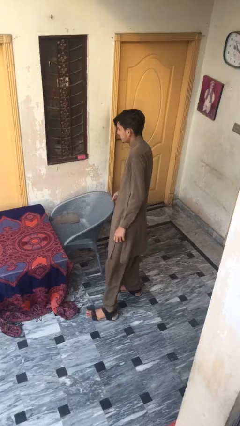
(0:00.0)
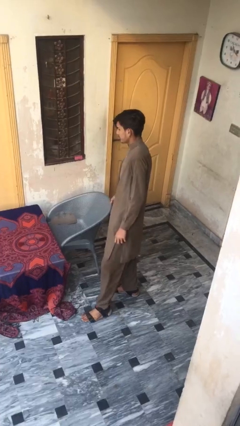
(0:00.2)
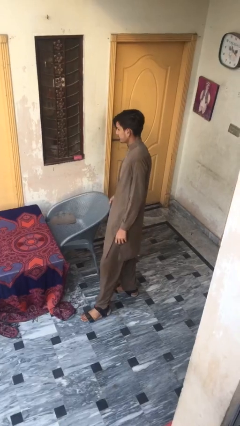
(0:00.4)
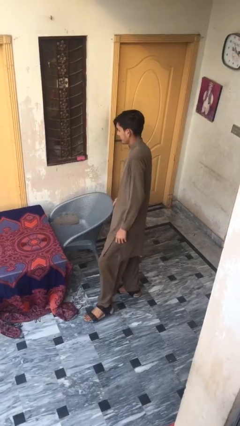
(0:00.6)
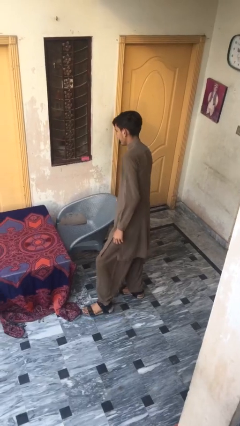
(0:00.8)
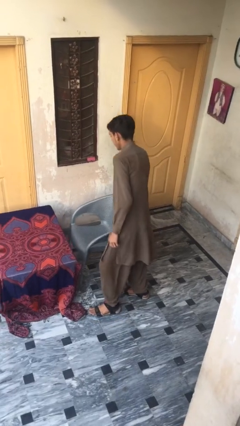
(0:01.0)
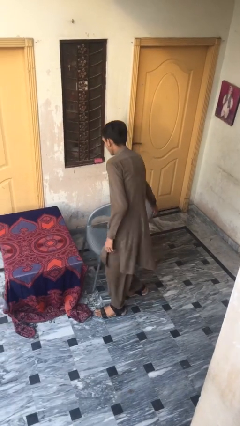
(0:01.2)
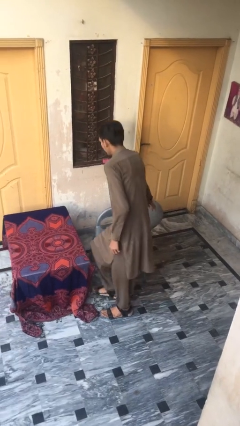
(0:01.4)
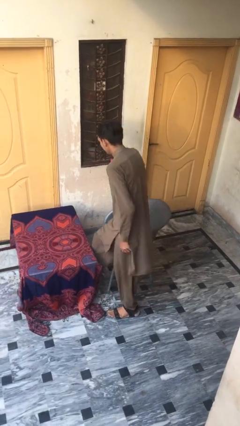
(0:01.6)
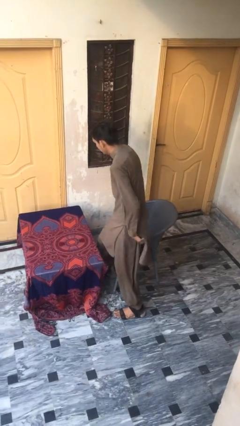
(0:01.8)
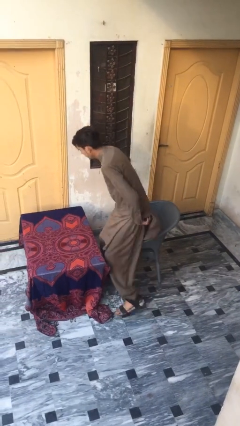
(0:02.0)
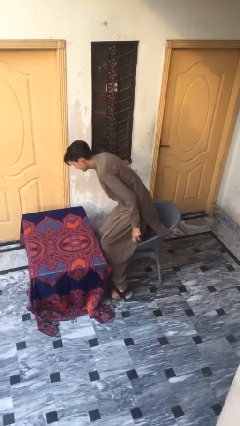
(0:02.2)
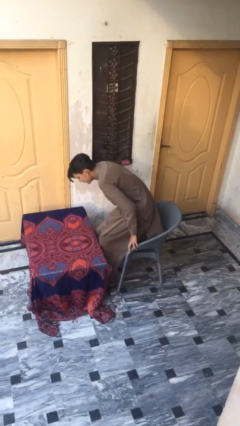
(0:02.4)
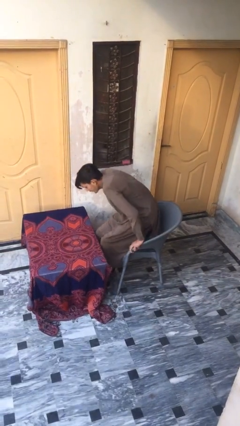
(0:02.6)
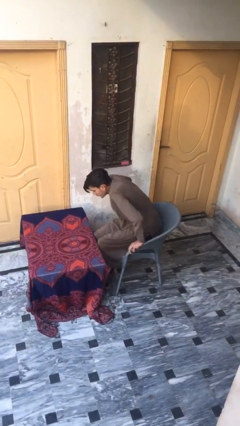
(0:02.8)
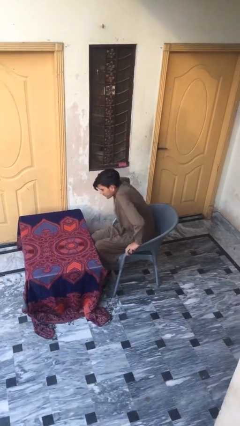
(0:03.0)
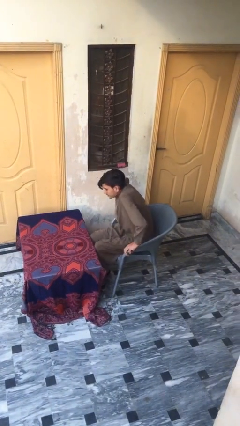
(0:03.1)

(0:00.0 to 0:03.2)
person sits down

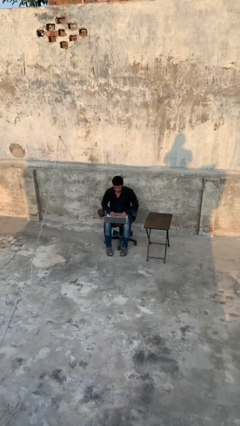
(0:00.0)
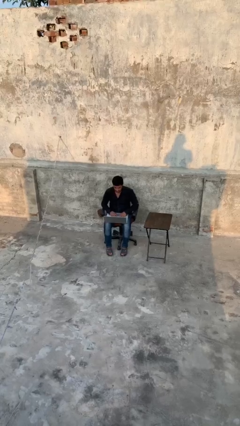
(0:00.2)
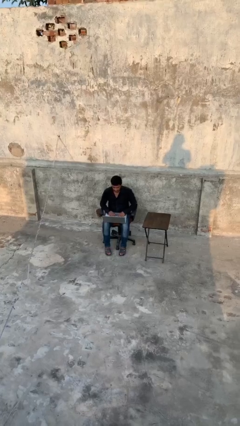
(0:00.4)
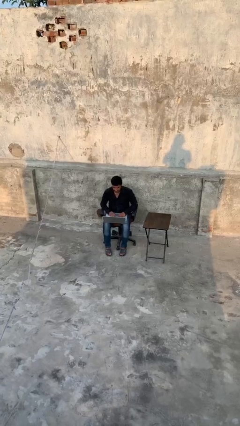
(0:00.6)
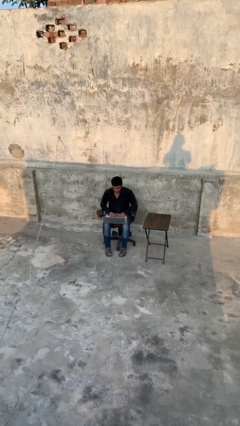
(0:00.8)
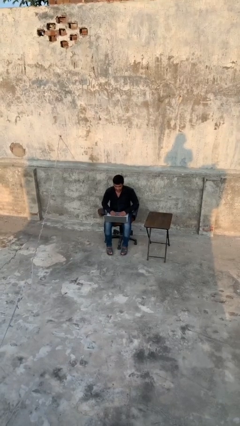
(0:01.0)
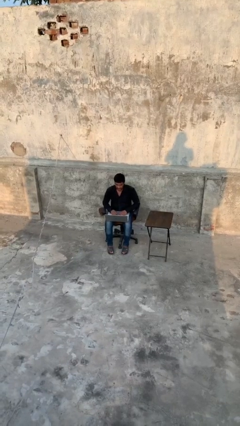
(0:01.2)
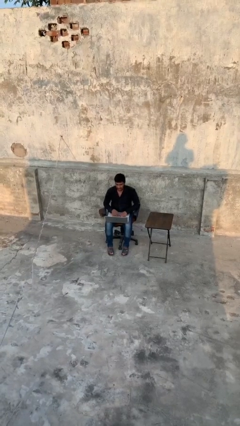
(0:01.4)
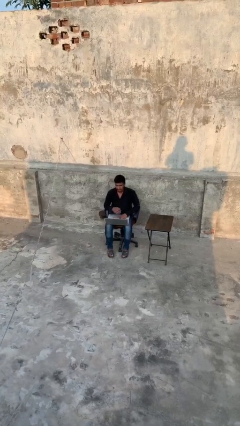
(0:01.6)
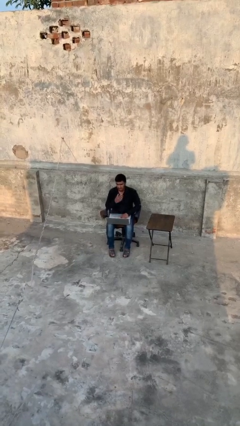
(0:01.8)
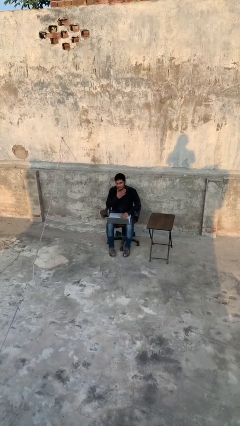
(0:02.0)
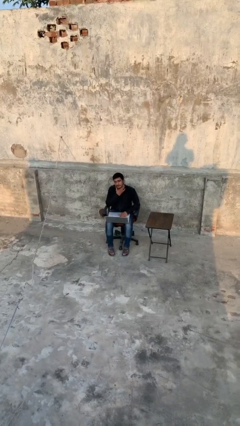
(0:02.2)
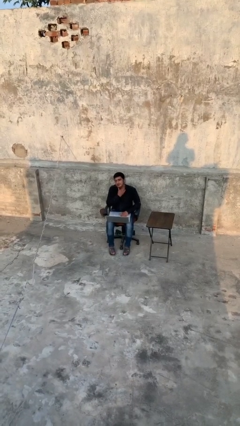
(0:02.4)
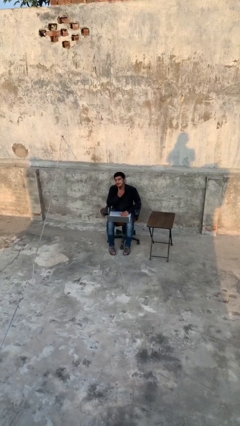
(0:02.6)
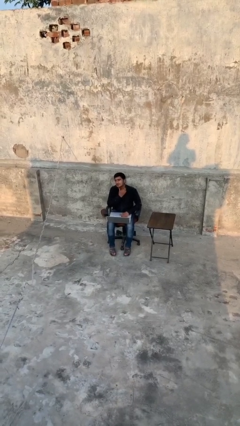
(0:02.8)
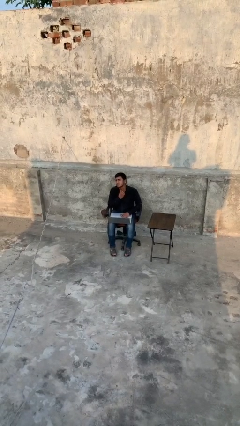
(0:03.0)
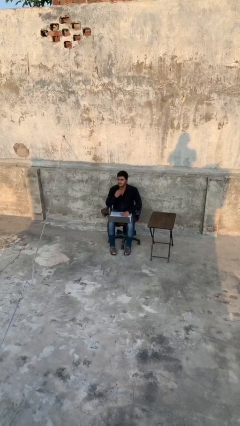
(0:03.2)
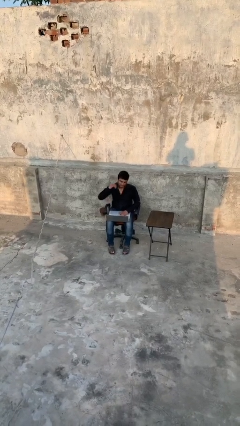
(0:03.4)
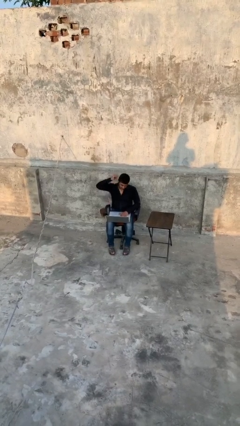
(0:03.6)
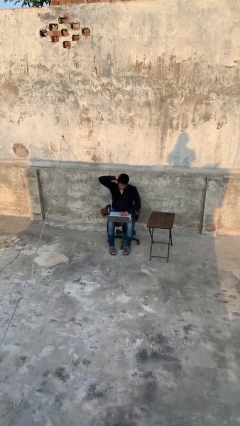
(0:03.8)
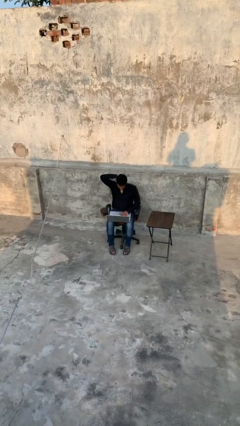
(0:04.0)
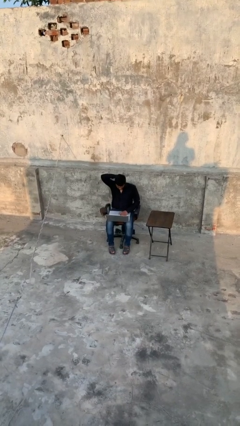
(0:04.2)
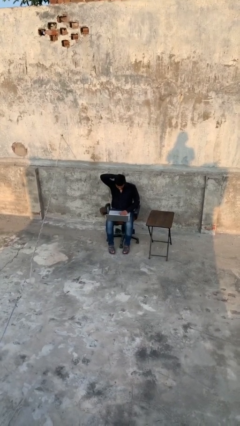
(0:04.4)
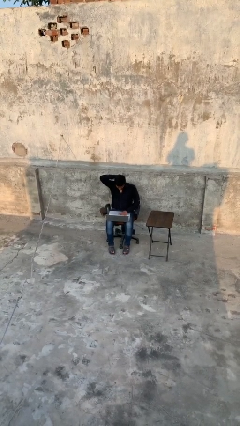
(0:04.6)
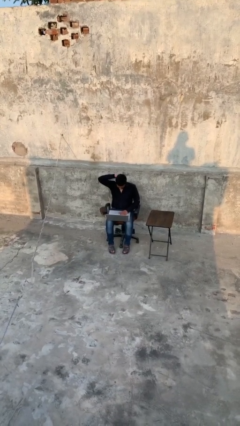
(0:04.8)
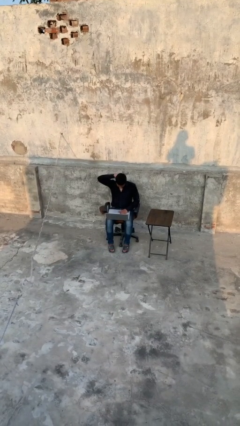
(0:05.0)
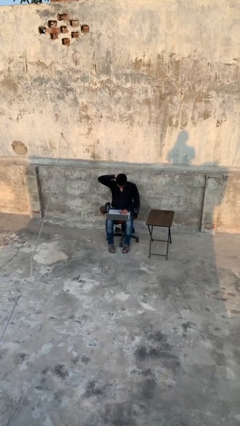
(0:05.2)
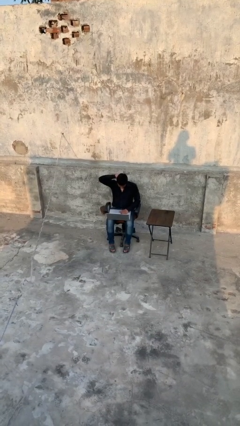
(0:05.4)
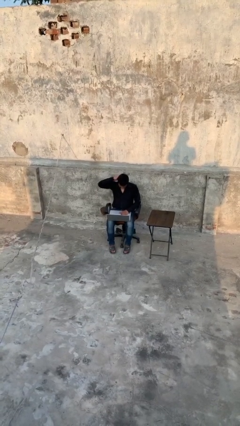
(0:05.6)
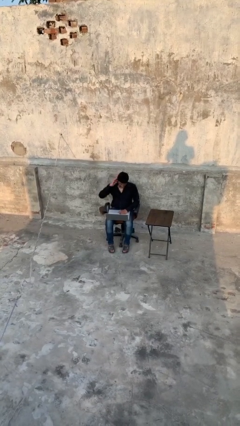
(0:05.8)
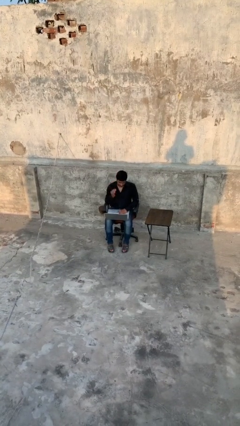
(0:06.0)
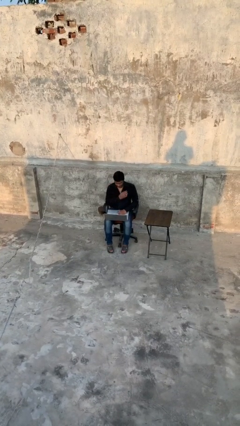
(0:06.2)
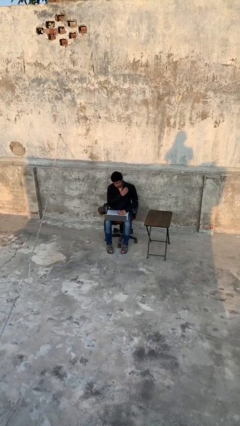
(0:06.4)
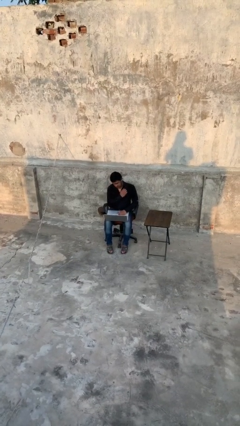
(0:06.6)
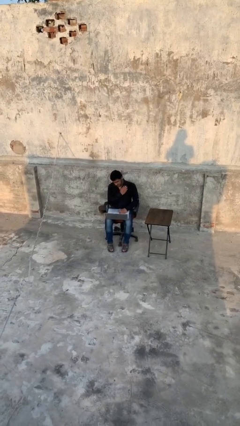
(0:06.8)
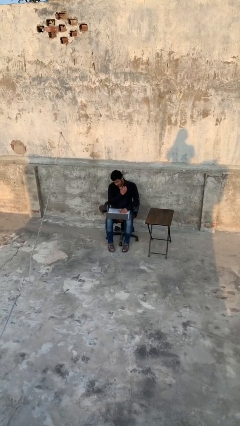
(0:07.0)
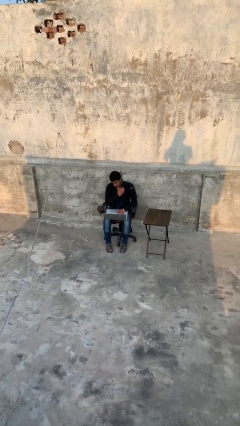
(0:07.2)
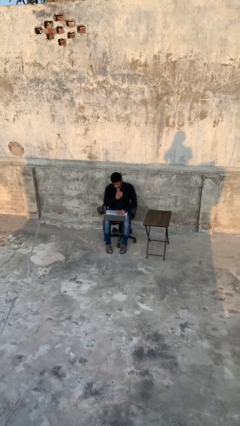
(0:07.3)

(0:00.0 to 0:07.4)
person interacts with laptop

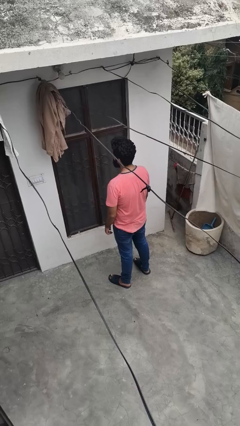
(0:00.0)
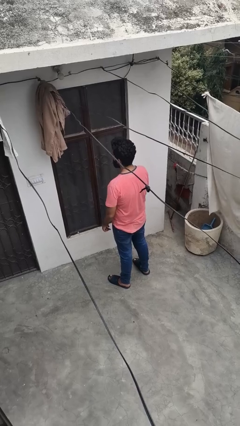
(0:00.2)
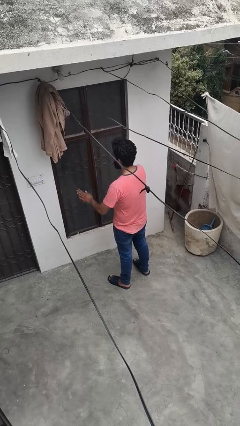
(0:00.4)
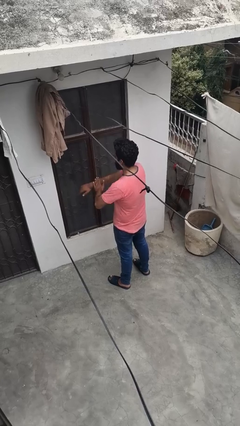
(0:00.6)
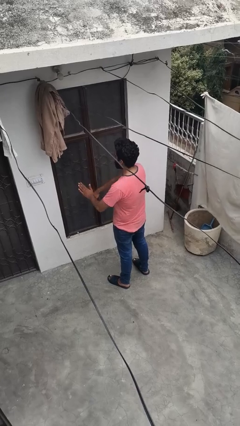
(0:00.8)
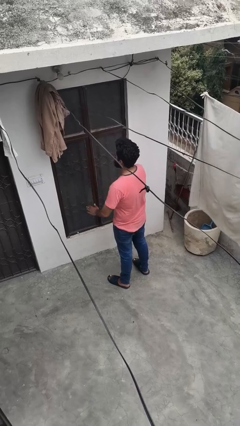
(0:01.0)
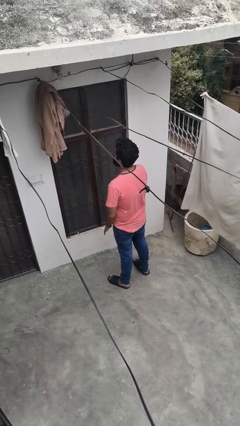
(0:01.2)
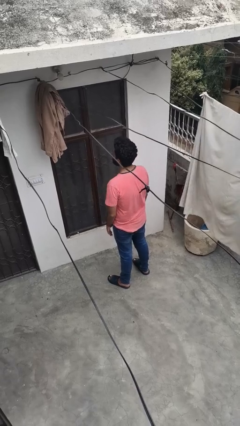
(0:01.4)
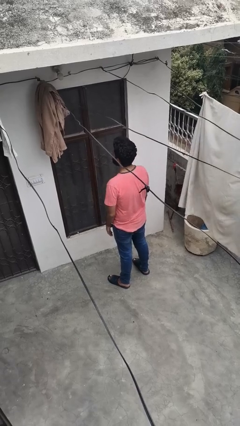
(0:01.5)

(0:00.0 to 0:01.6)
person swats bug

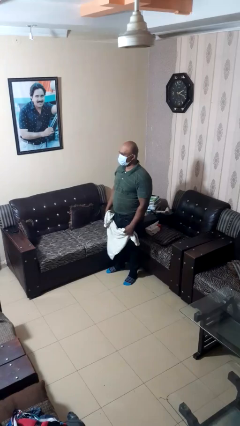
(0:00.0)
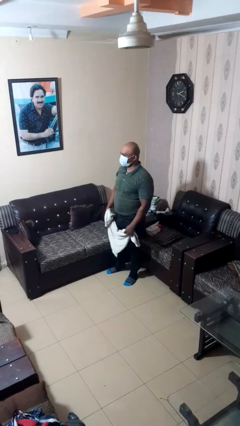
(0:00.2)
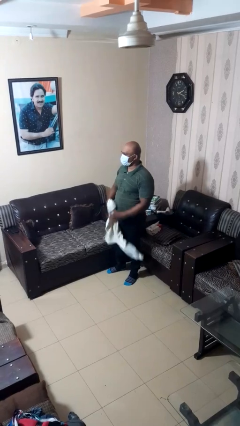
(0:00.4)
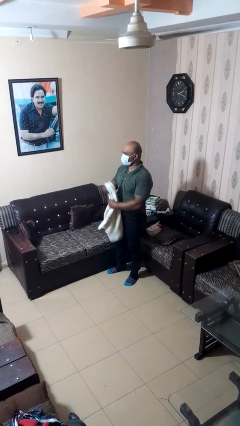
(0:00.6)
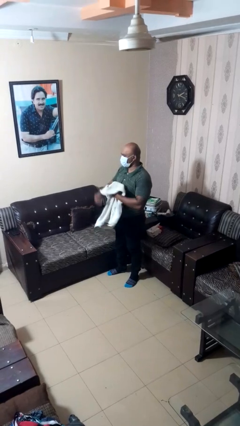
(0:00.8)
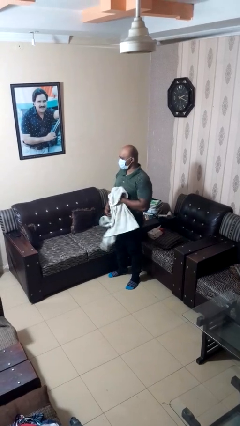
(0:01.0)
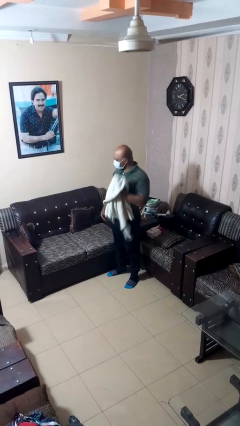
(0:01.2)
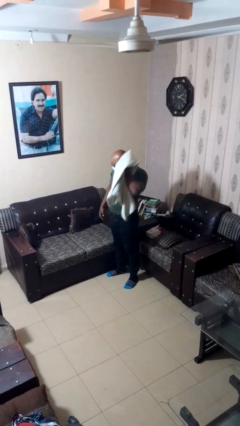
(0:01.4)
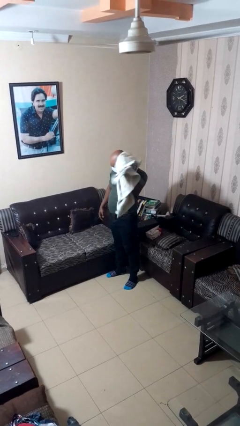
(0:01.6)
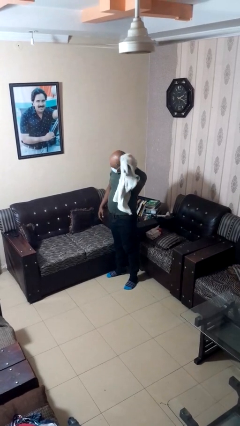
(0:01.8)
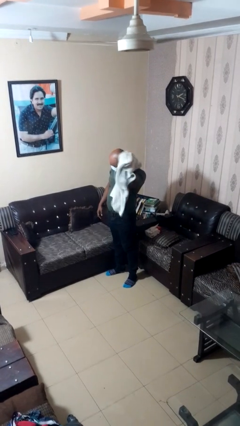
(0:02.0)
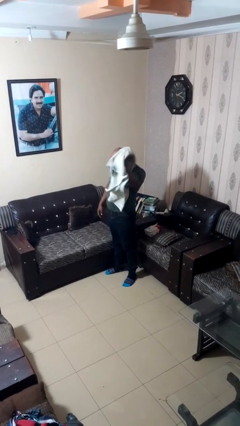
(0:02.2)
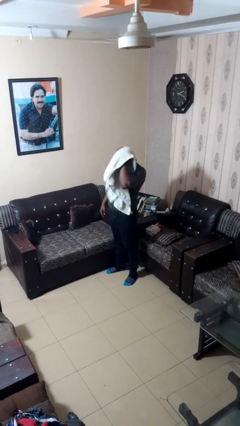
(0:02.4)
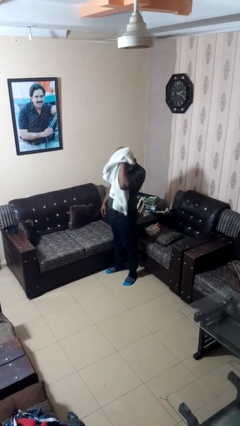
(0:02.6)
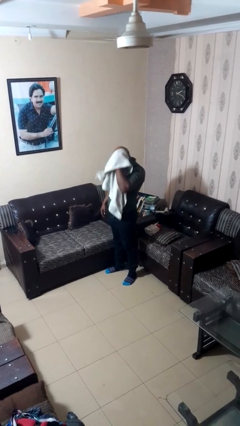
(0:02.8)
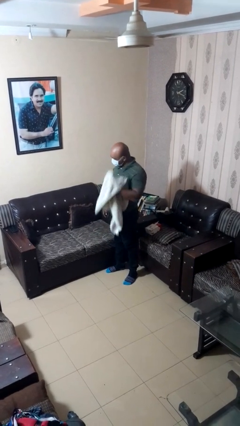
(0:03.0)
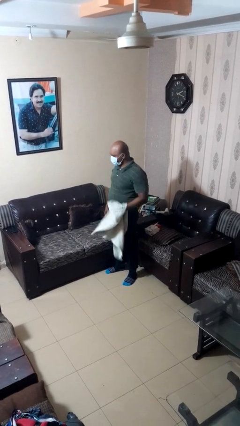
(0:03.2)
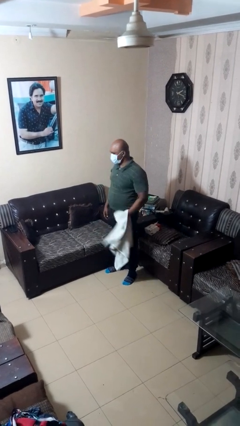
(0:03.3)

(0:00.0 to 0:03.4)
person dries hair with towel

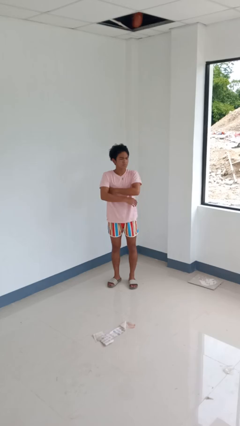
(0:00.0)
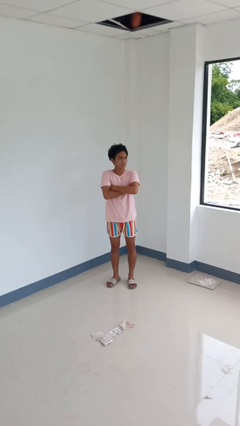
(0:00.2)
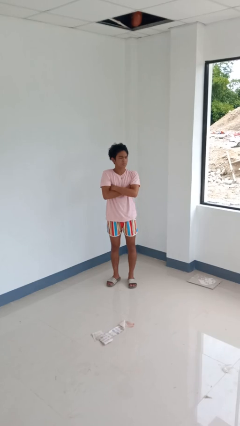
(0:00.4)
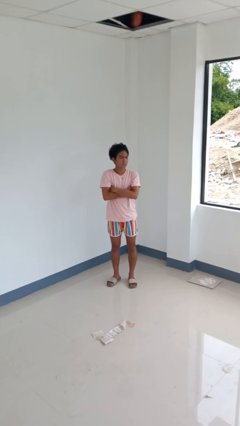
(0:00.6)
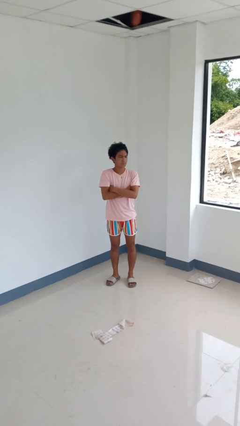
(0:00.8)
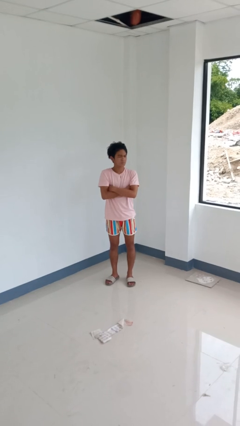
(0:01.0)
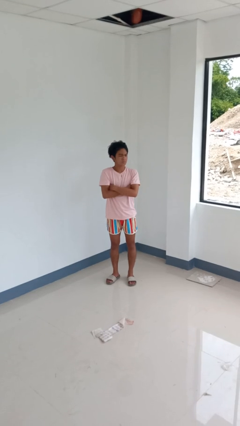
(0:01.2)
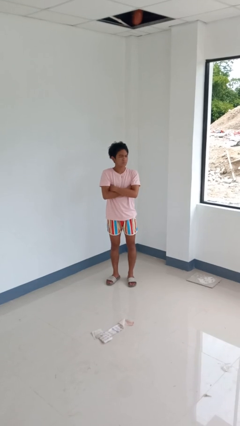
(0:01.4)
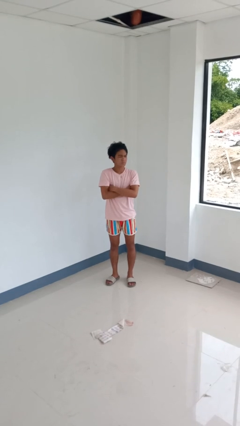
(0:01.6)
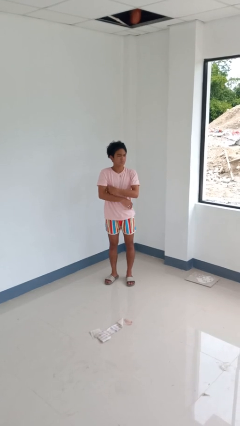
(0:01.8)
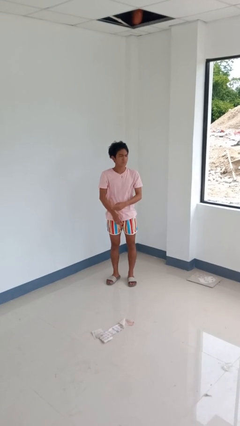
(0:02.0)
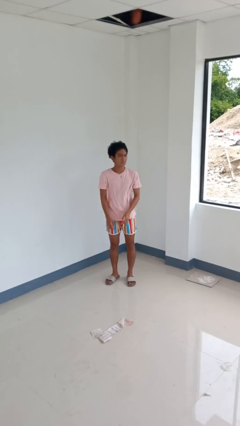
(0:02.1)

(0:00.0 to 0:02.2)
person crosses arms
